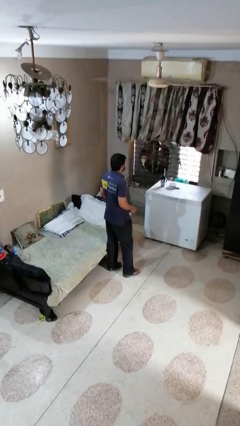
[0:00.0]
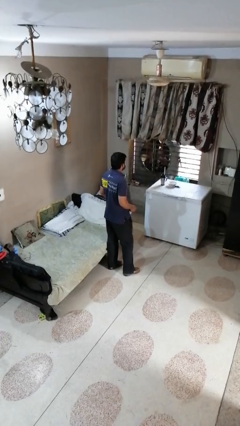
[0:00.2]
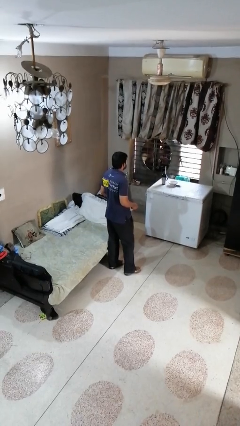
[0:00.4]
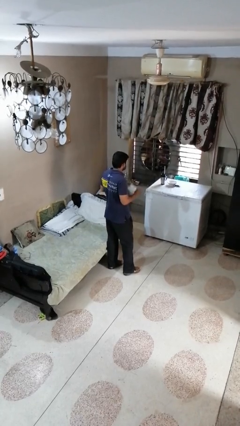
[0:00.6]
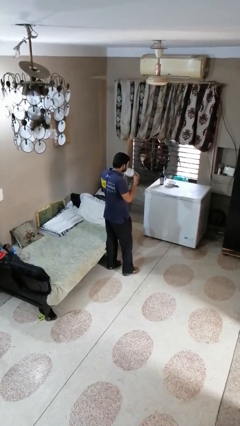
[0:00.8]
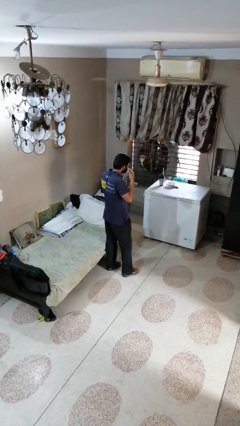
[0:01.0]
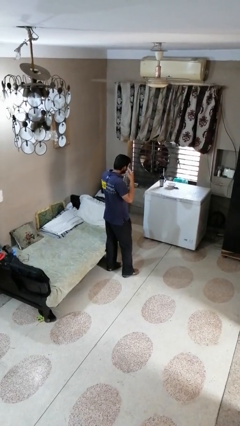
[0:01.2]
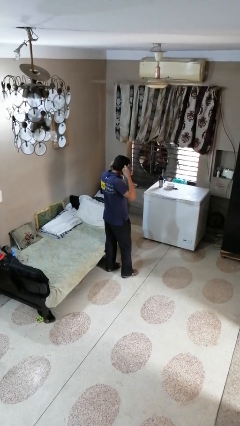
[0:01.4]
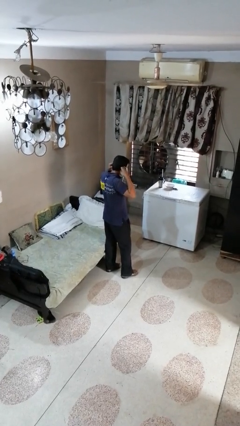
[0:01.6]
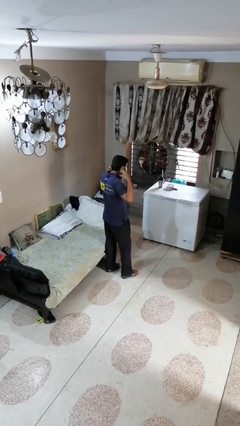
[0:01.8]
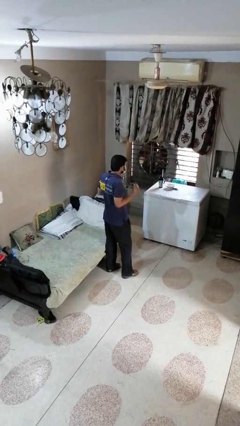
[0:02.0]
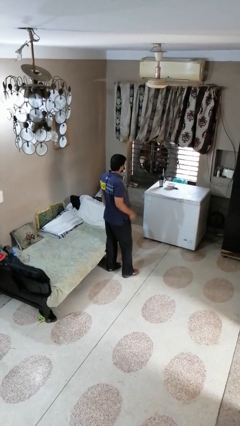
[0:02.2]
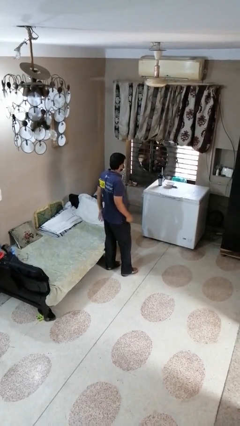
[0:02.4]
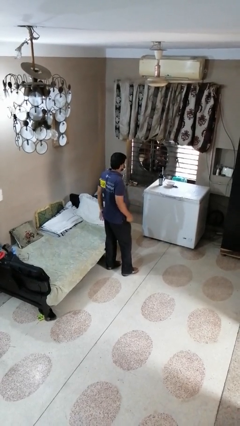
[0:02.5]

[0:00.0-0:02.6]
person puts on facemask

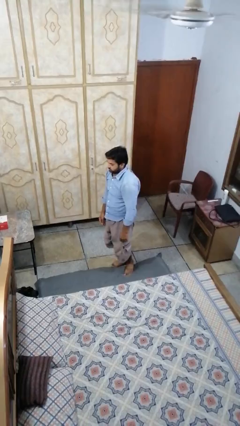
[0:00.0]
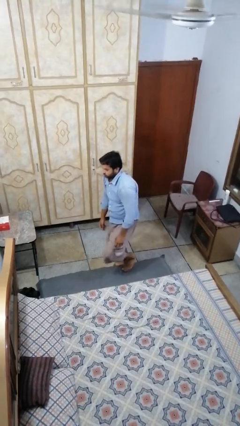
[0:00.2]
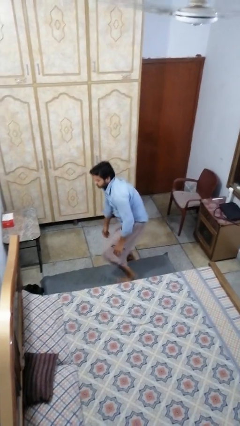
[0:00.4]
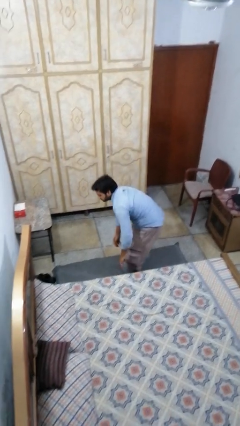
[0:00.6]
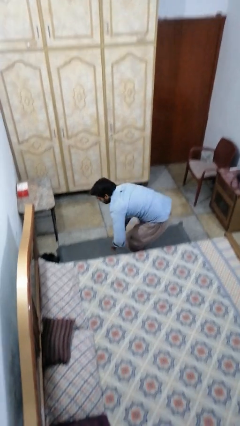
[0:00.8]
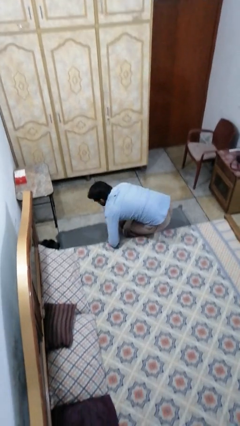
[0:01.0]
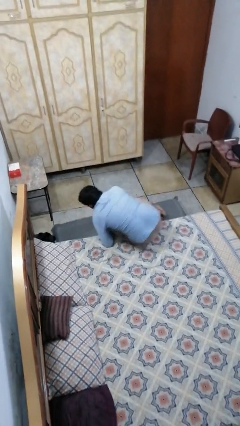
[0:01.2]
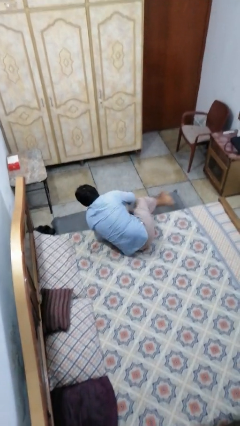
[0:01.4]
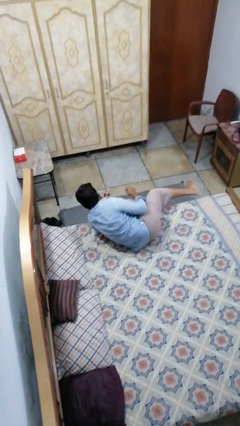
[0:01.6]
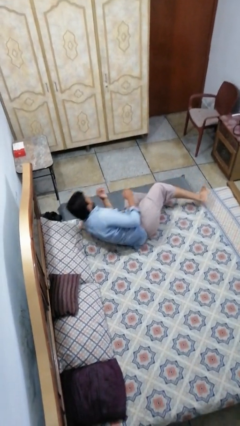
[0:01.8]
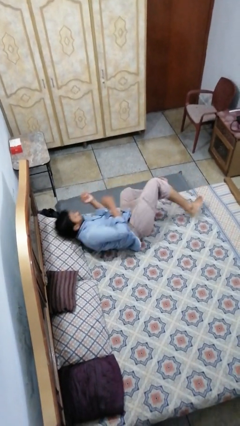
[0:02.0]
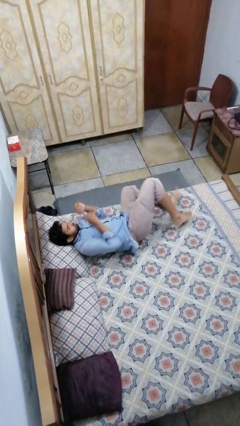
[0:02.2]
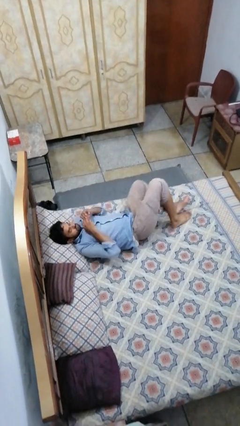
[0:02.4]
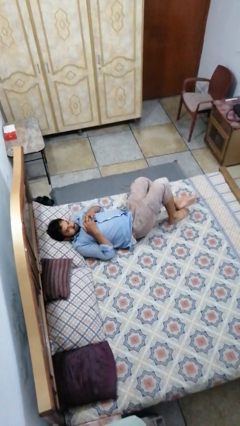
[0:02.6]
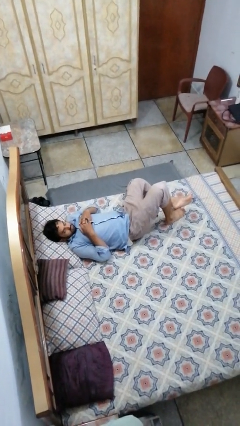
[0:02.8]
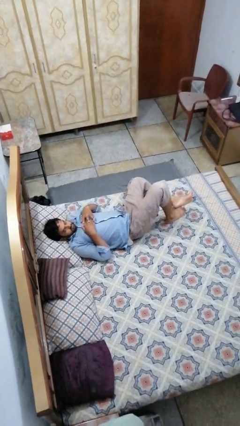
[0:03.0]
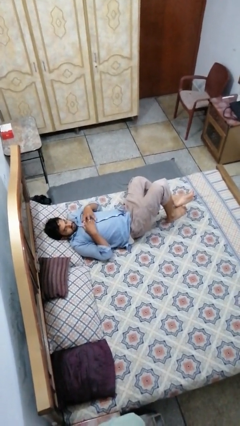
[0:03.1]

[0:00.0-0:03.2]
person lies down on bed

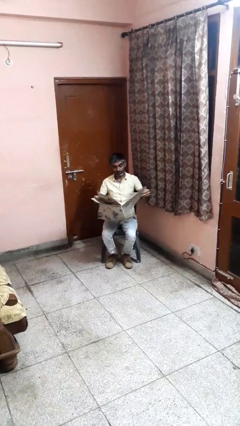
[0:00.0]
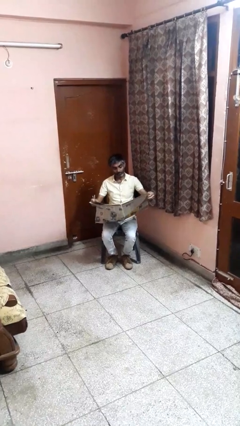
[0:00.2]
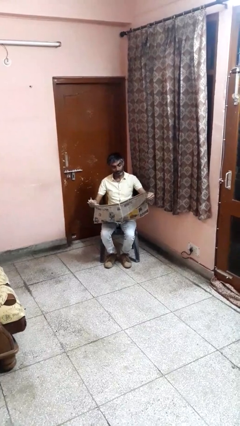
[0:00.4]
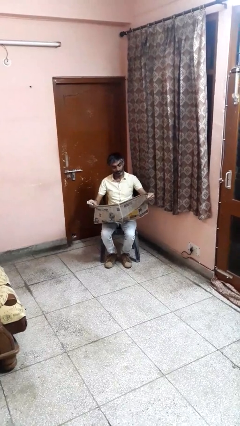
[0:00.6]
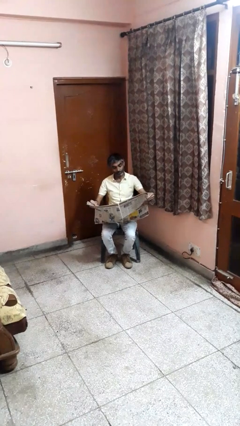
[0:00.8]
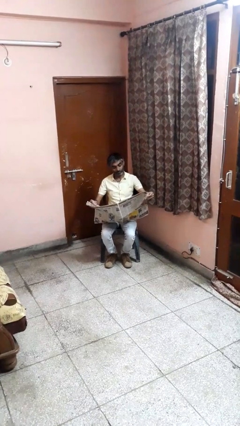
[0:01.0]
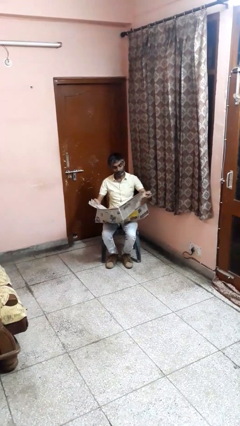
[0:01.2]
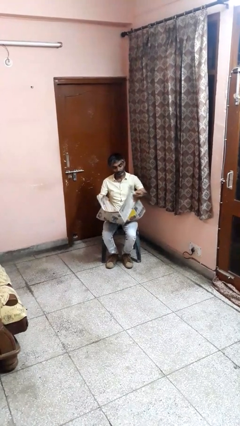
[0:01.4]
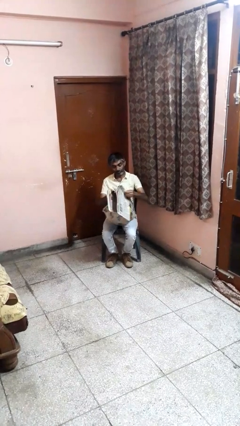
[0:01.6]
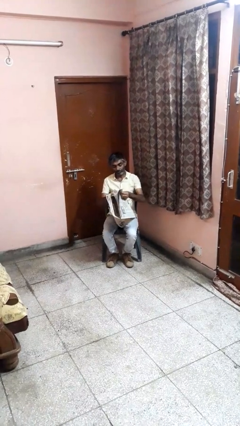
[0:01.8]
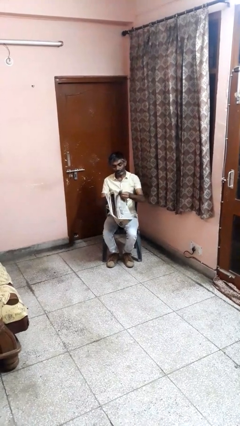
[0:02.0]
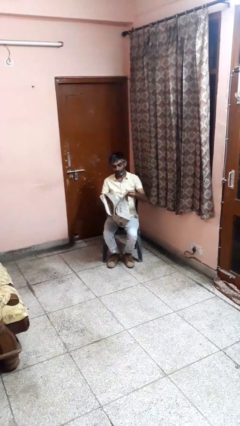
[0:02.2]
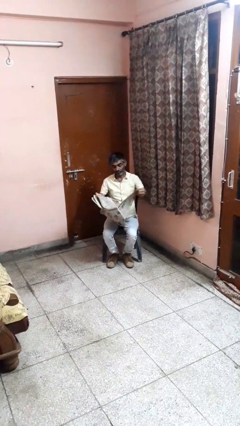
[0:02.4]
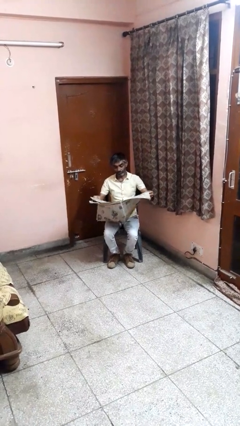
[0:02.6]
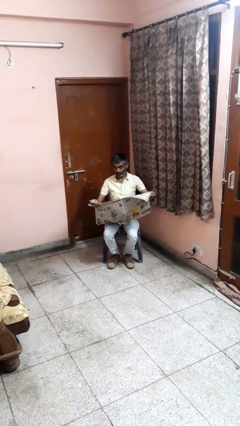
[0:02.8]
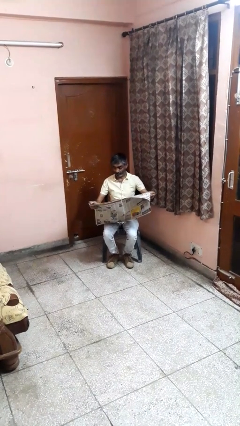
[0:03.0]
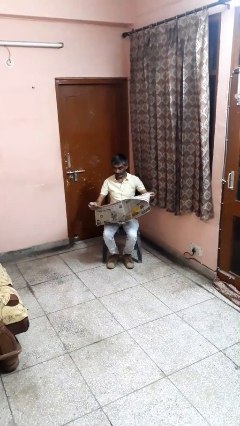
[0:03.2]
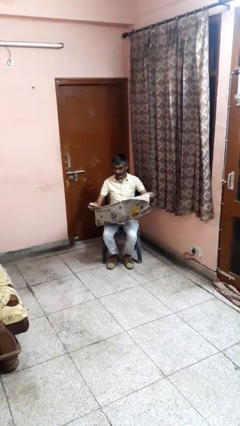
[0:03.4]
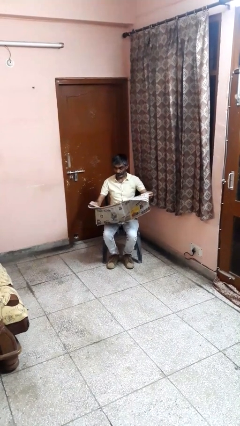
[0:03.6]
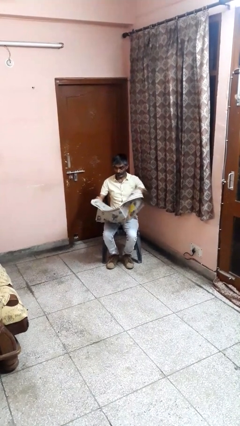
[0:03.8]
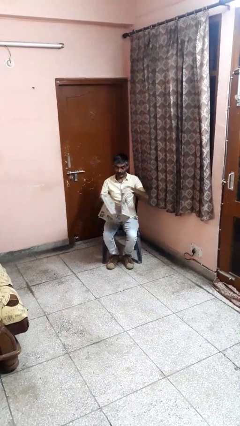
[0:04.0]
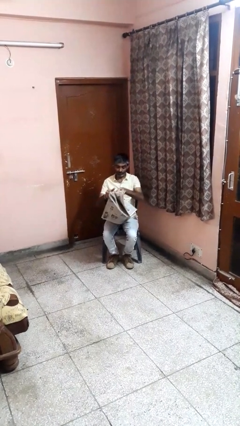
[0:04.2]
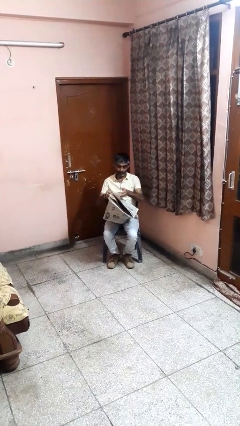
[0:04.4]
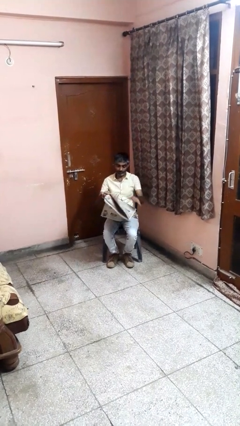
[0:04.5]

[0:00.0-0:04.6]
person reads newspaper

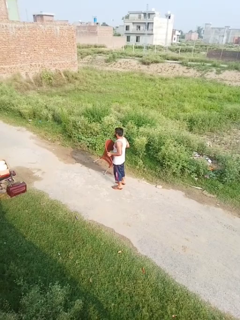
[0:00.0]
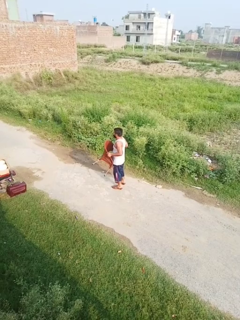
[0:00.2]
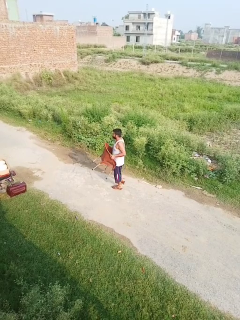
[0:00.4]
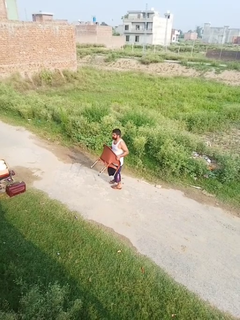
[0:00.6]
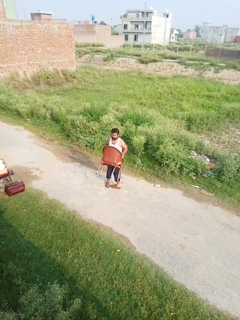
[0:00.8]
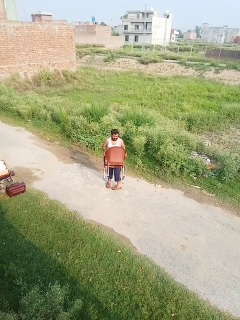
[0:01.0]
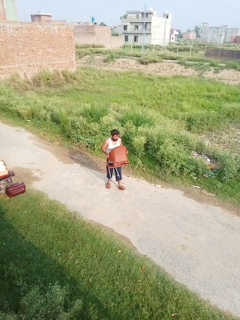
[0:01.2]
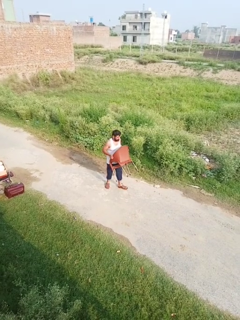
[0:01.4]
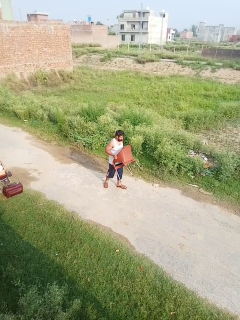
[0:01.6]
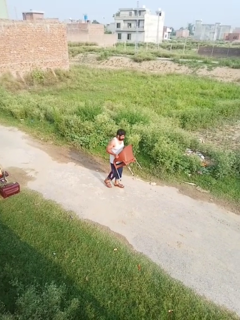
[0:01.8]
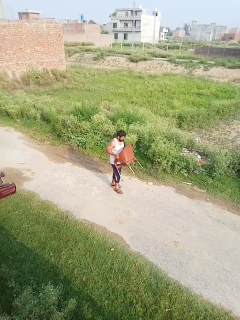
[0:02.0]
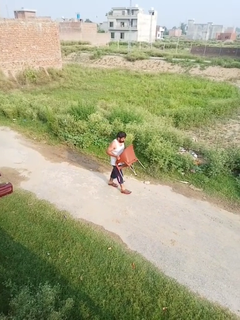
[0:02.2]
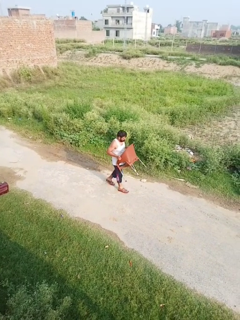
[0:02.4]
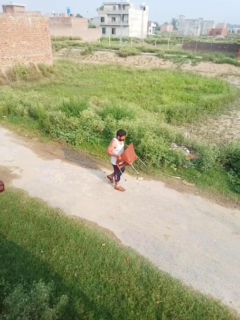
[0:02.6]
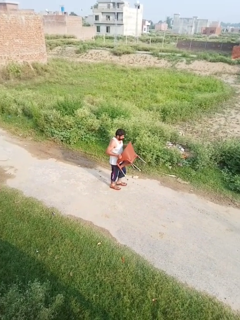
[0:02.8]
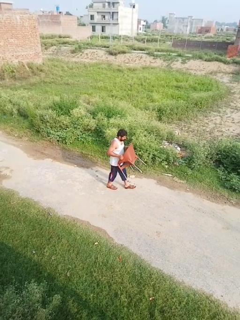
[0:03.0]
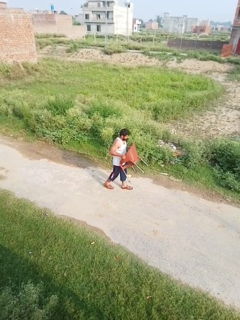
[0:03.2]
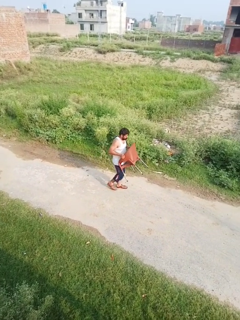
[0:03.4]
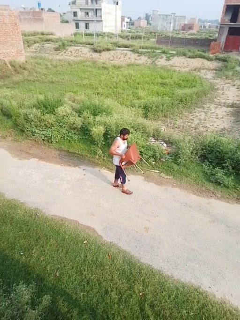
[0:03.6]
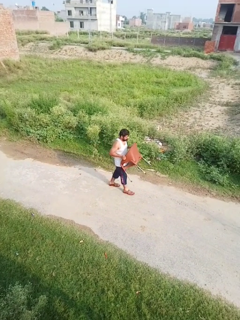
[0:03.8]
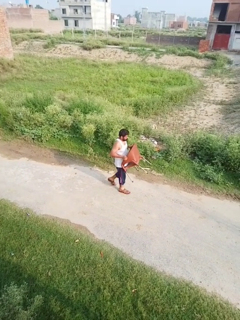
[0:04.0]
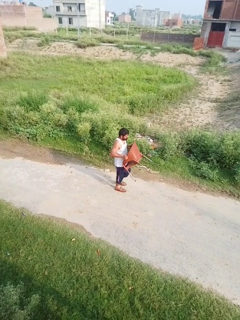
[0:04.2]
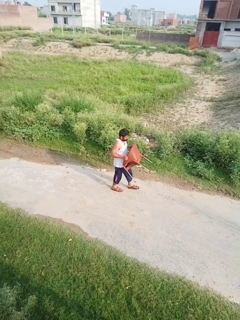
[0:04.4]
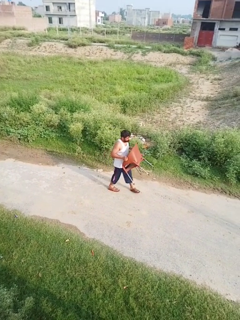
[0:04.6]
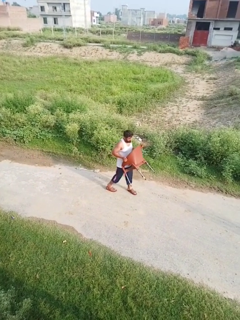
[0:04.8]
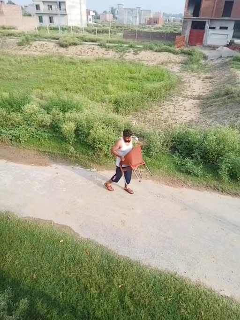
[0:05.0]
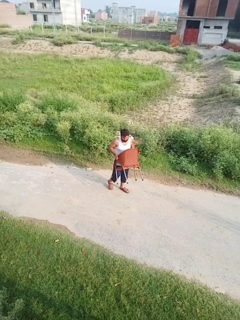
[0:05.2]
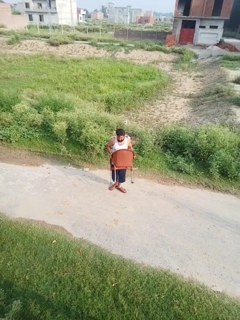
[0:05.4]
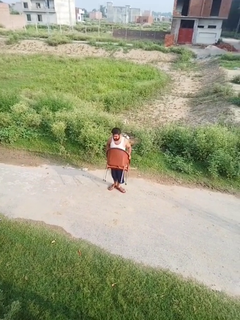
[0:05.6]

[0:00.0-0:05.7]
person carries furniture

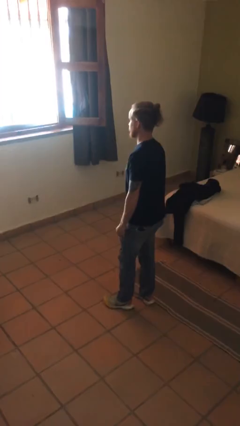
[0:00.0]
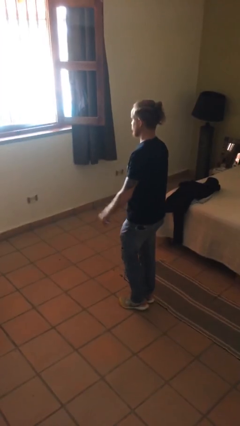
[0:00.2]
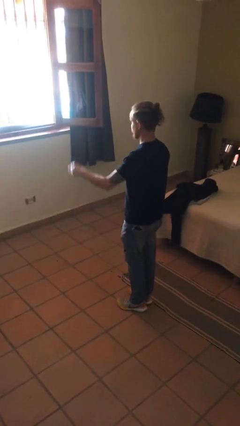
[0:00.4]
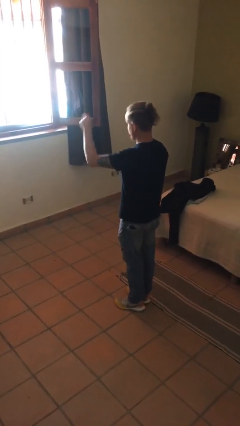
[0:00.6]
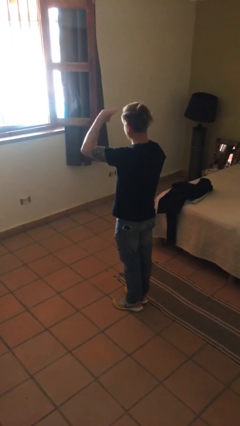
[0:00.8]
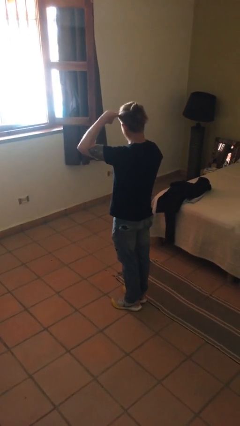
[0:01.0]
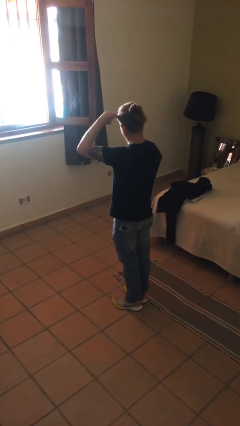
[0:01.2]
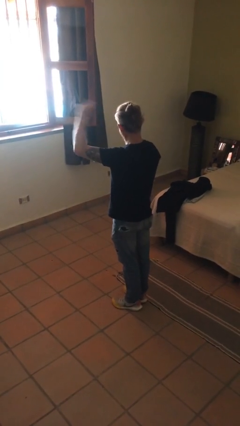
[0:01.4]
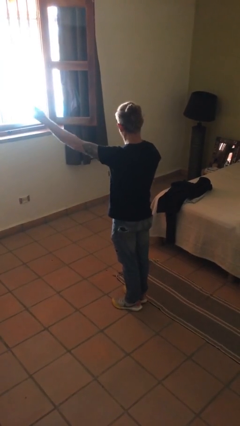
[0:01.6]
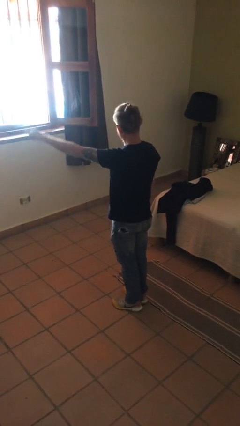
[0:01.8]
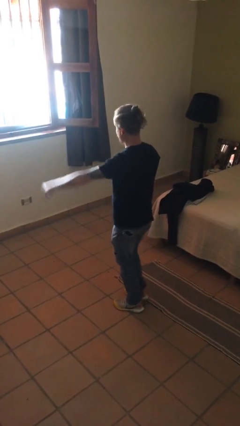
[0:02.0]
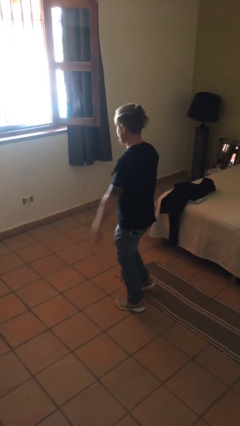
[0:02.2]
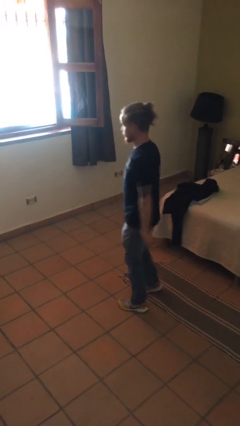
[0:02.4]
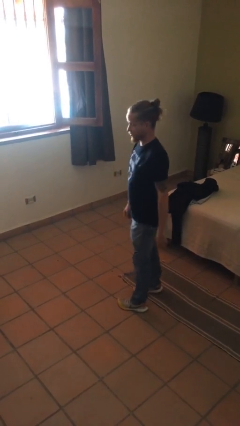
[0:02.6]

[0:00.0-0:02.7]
person salutes
